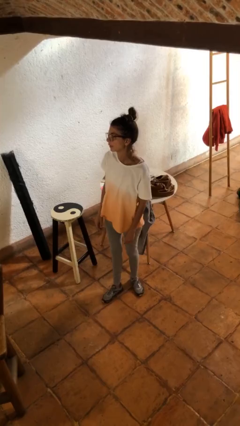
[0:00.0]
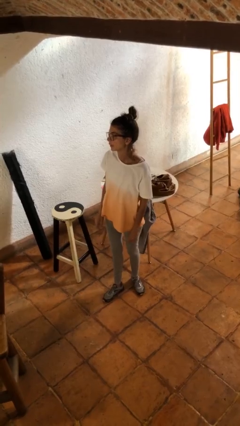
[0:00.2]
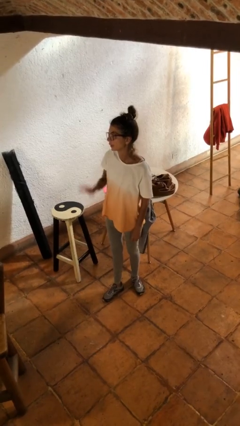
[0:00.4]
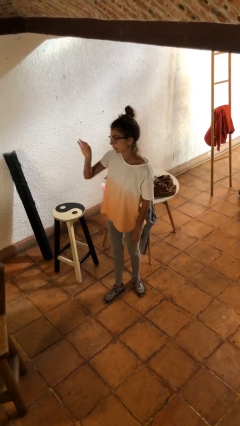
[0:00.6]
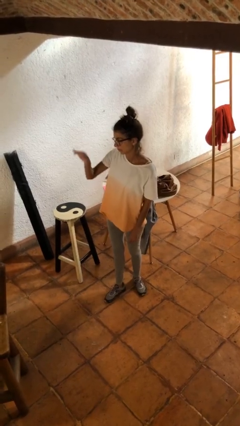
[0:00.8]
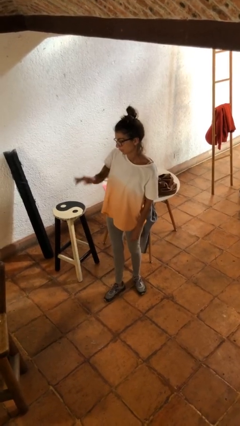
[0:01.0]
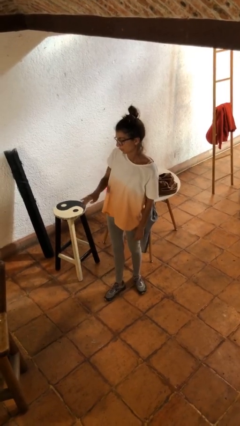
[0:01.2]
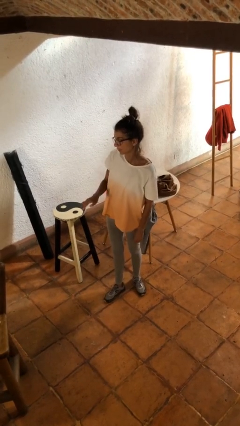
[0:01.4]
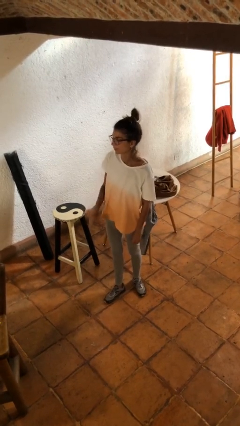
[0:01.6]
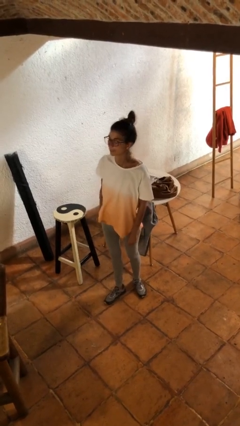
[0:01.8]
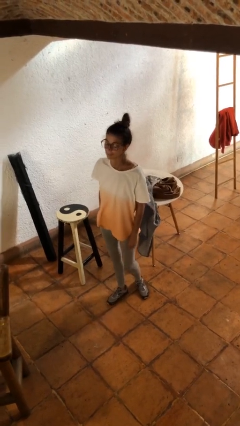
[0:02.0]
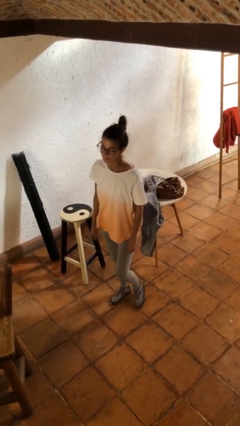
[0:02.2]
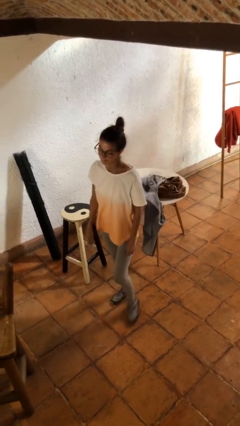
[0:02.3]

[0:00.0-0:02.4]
person gestures swipe down

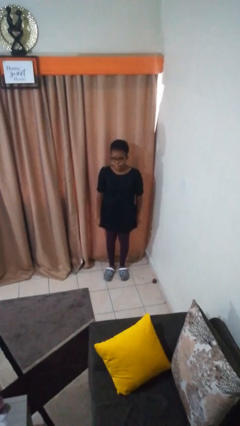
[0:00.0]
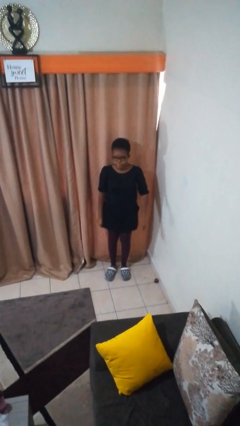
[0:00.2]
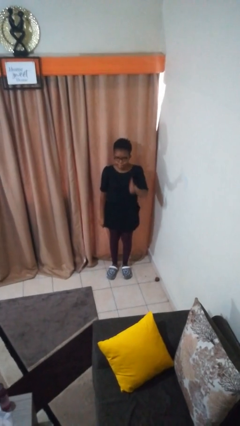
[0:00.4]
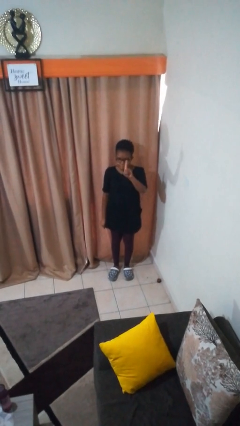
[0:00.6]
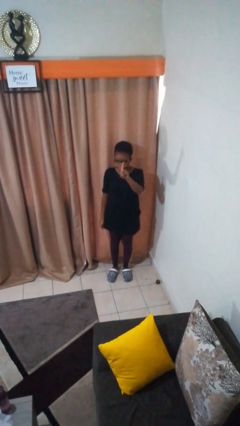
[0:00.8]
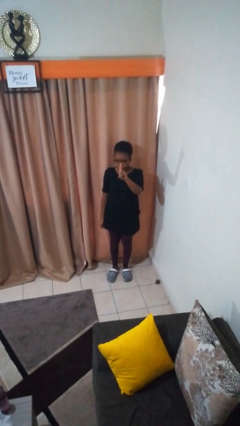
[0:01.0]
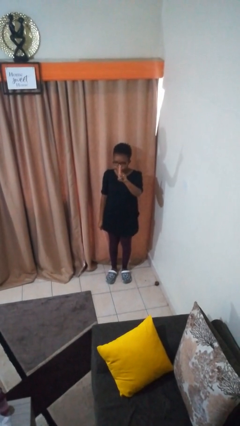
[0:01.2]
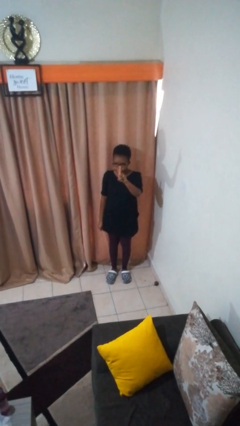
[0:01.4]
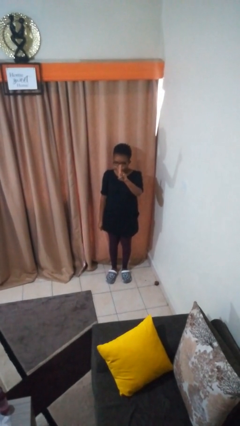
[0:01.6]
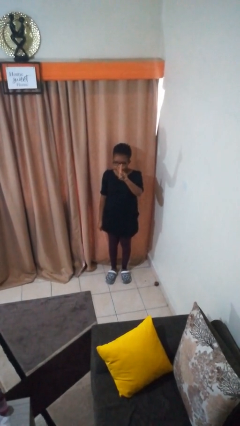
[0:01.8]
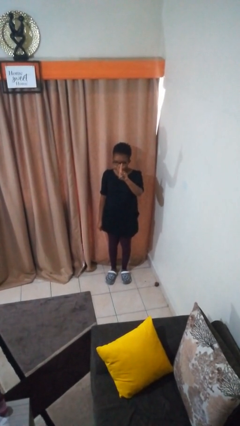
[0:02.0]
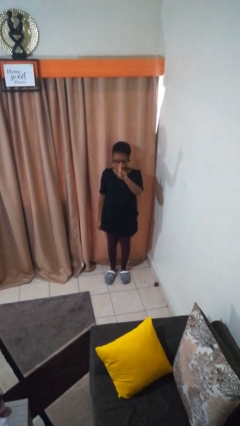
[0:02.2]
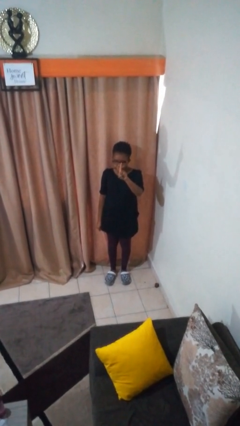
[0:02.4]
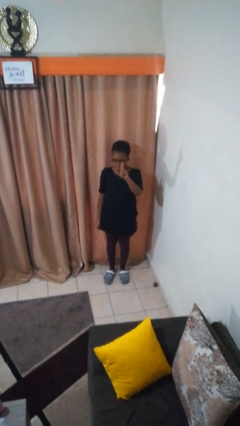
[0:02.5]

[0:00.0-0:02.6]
person gestures number one

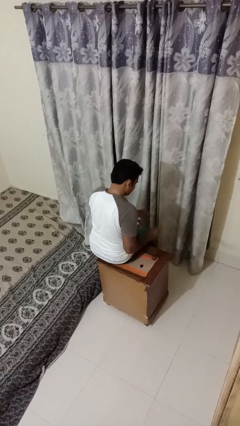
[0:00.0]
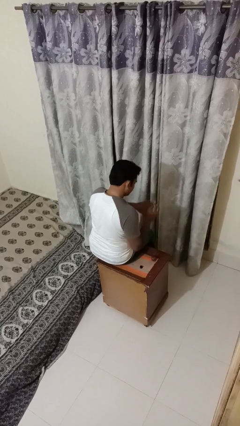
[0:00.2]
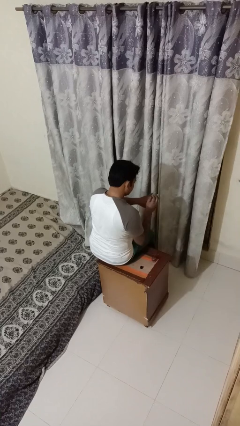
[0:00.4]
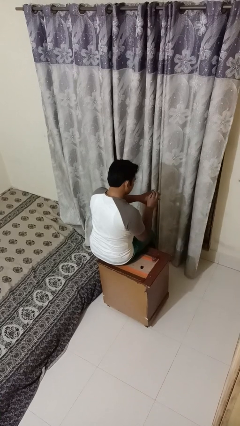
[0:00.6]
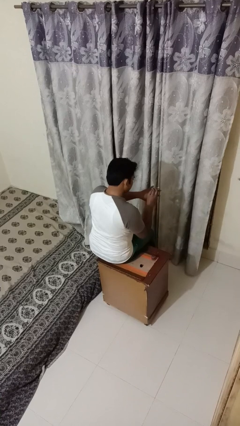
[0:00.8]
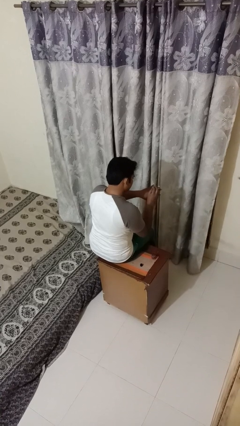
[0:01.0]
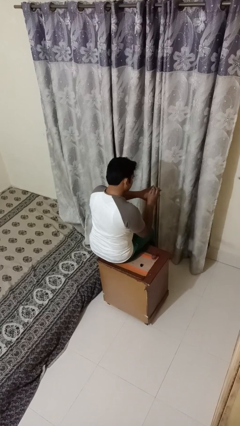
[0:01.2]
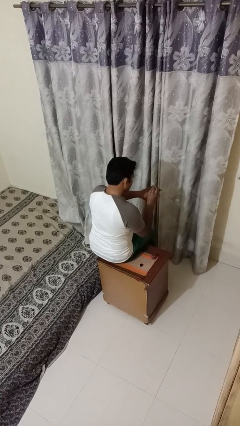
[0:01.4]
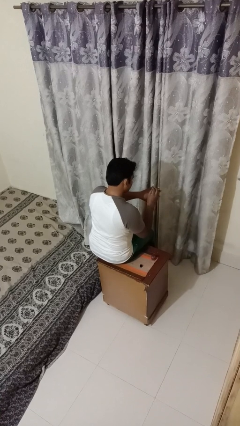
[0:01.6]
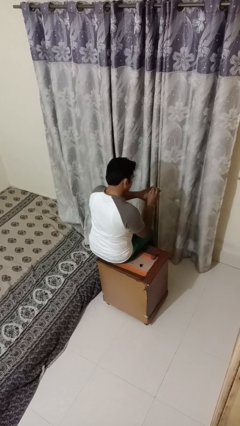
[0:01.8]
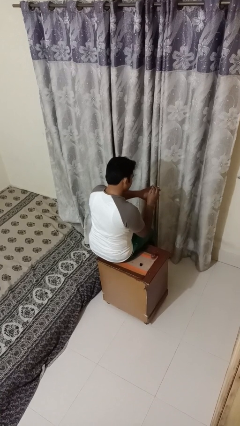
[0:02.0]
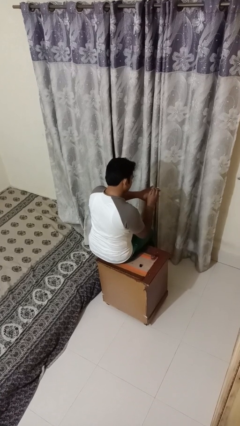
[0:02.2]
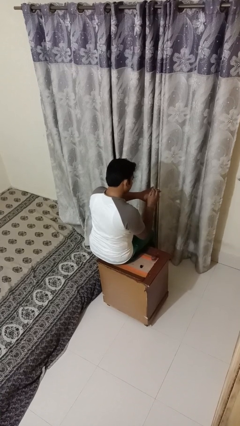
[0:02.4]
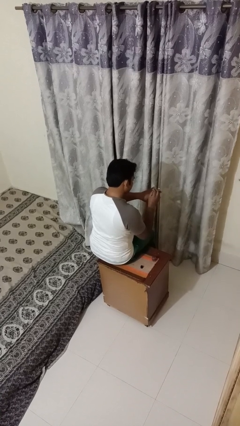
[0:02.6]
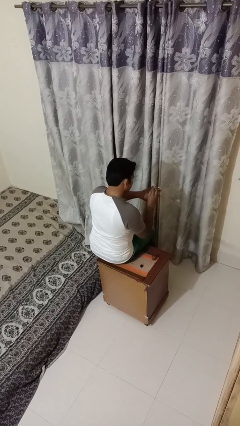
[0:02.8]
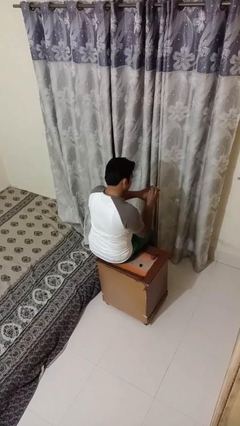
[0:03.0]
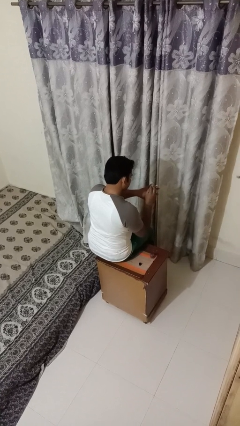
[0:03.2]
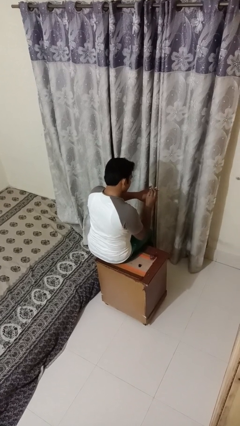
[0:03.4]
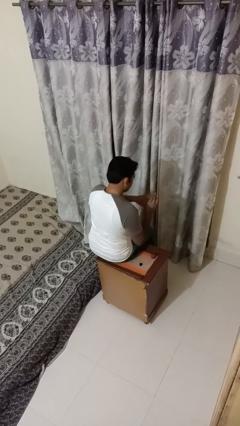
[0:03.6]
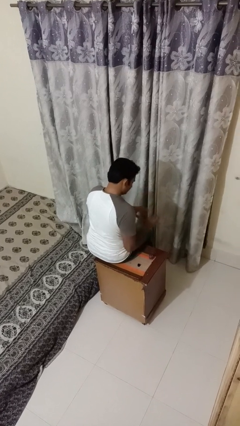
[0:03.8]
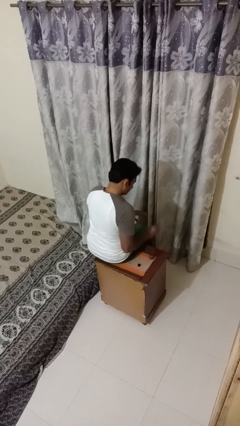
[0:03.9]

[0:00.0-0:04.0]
person paints fingernails

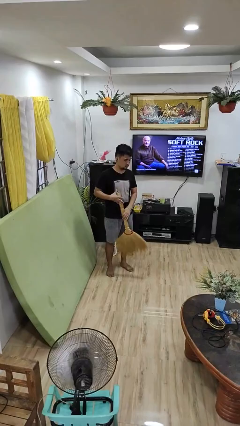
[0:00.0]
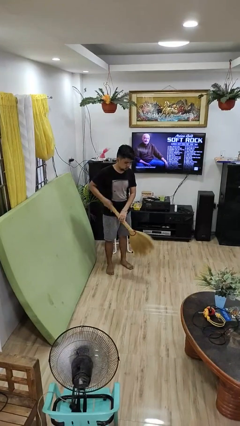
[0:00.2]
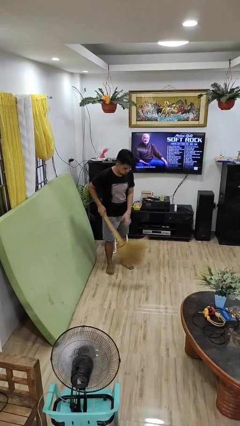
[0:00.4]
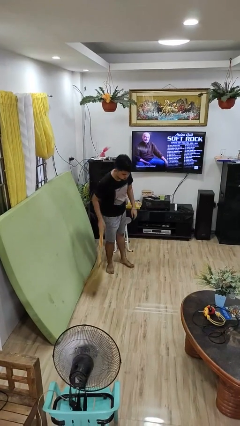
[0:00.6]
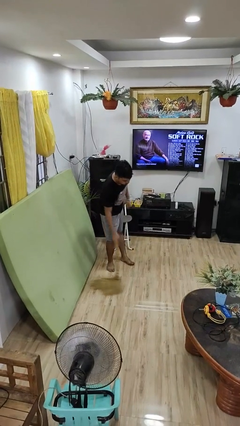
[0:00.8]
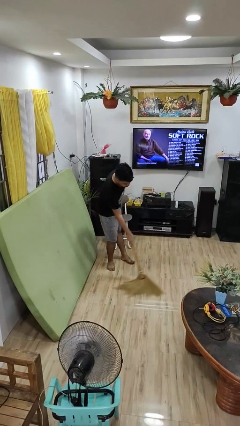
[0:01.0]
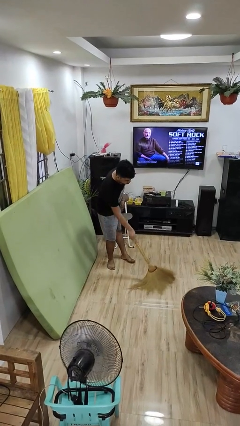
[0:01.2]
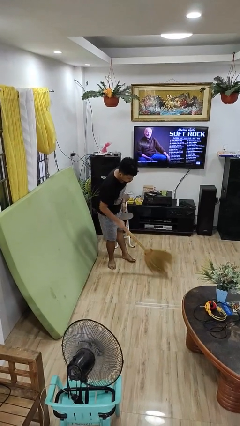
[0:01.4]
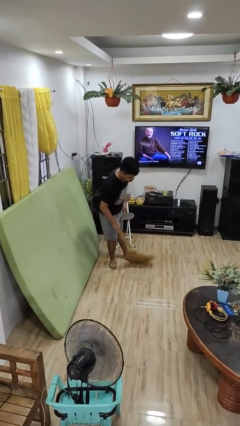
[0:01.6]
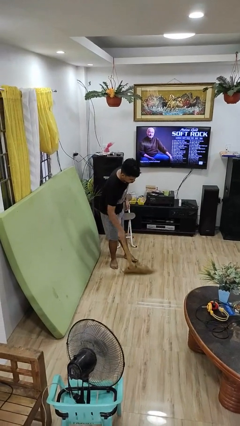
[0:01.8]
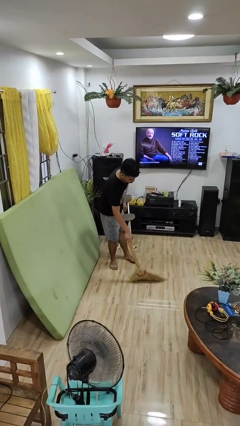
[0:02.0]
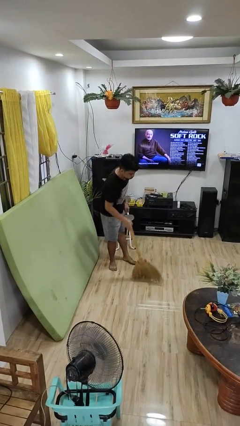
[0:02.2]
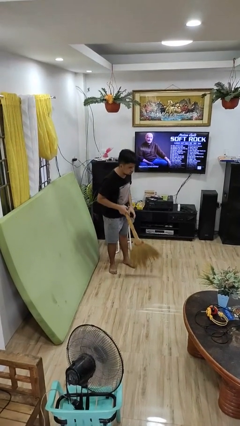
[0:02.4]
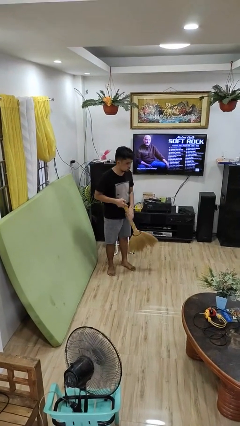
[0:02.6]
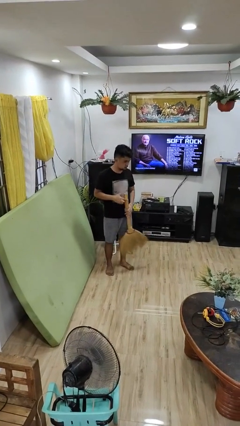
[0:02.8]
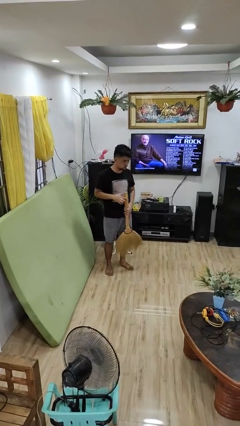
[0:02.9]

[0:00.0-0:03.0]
person sweeps floor

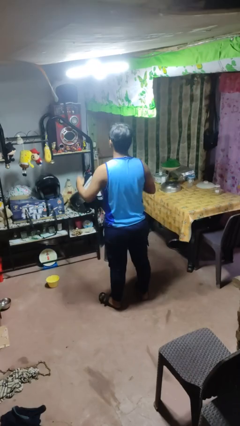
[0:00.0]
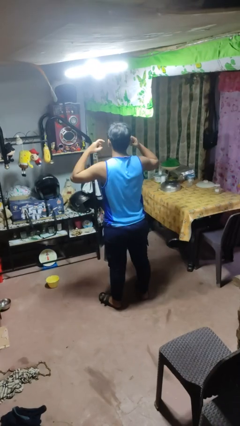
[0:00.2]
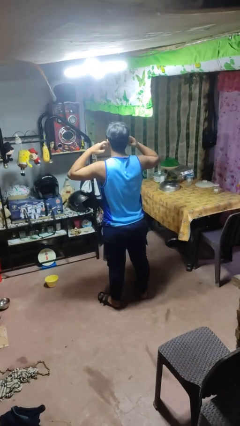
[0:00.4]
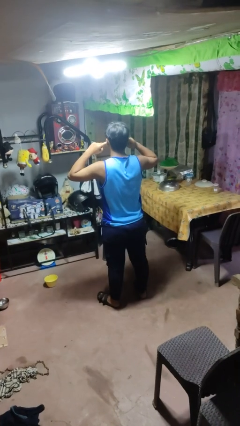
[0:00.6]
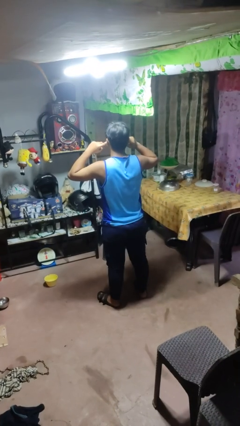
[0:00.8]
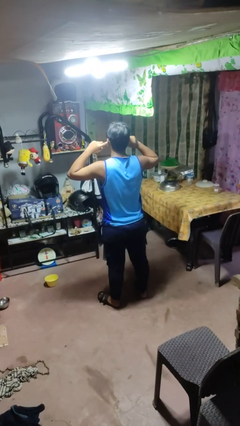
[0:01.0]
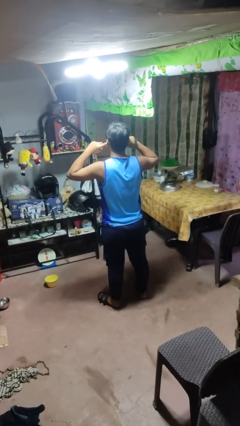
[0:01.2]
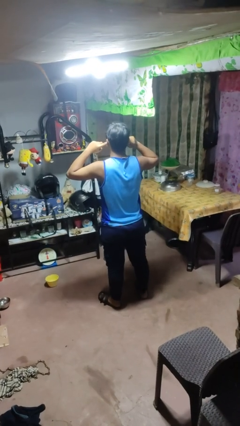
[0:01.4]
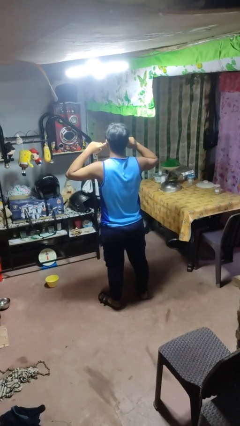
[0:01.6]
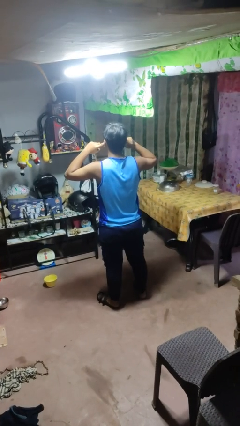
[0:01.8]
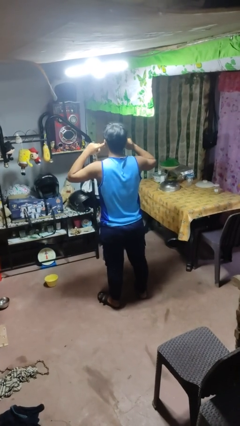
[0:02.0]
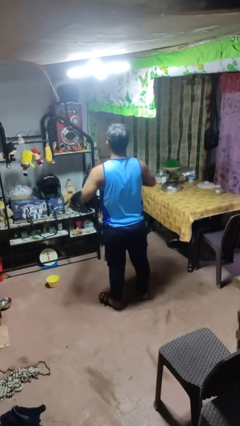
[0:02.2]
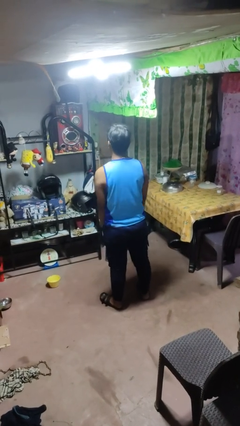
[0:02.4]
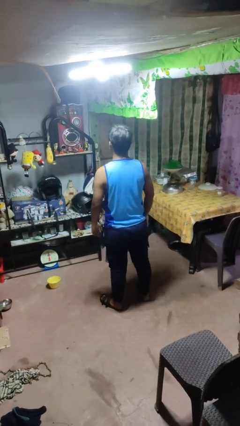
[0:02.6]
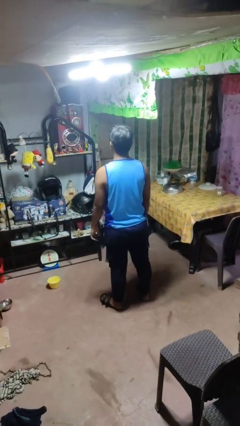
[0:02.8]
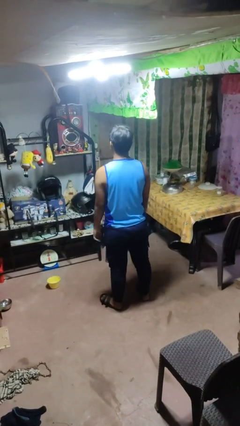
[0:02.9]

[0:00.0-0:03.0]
person puts fingers in ear

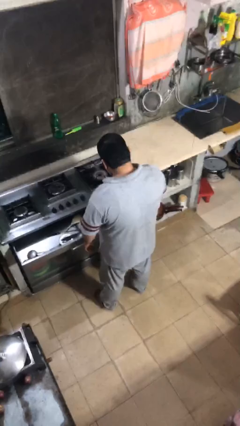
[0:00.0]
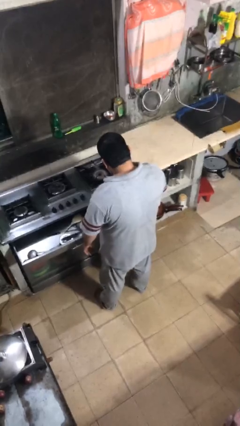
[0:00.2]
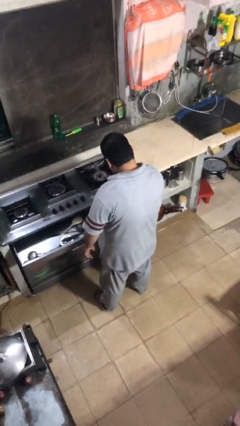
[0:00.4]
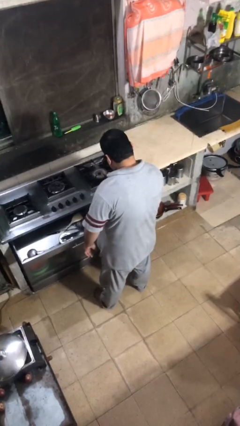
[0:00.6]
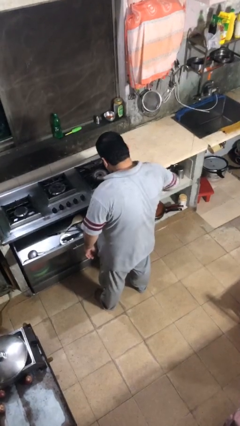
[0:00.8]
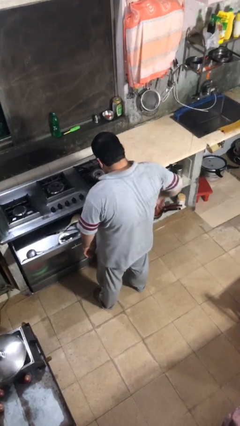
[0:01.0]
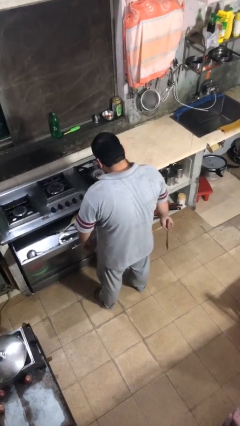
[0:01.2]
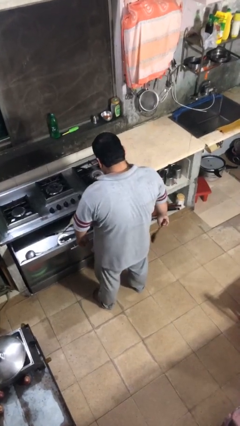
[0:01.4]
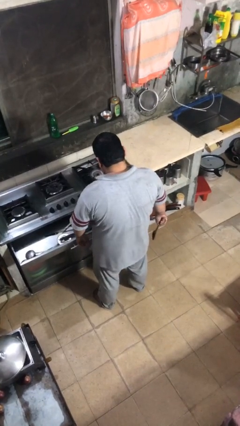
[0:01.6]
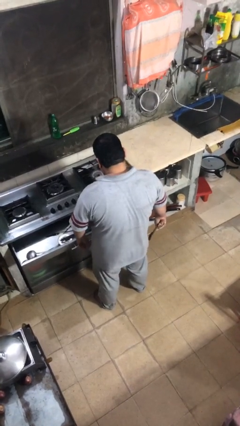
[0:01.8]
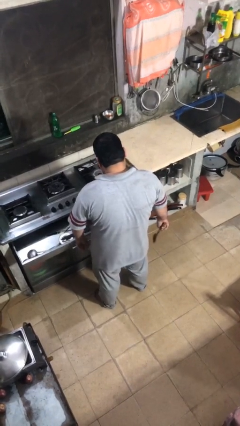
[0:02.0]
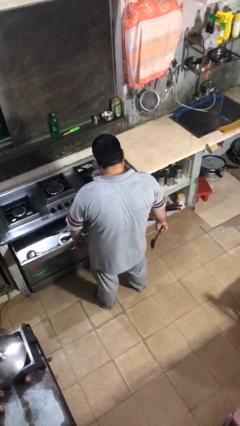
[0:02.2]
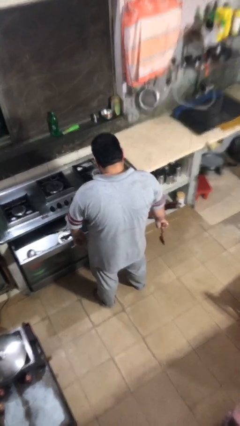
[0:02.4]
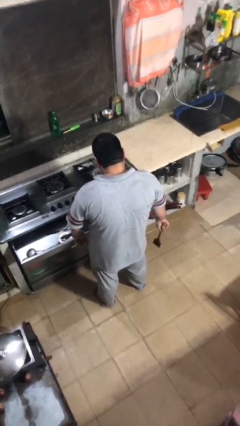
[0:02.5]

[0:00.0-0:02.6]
person takes object from kitchen drawer
